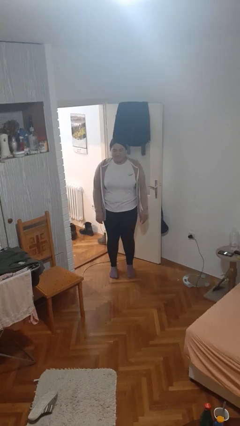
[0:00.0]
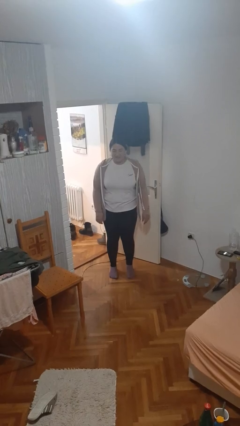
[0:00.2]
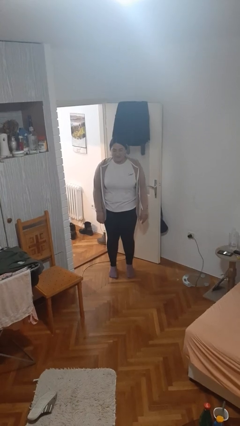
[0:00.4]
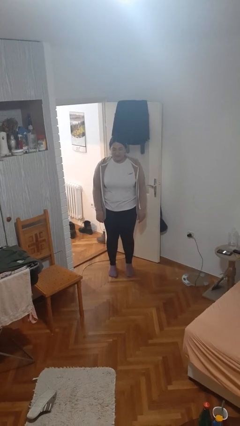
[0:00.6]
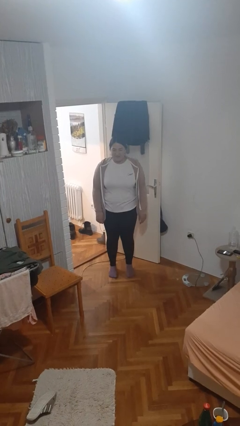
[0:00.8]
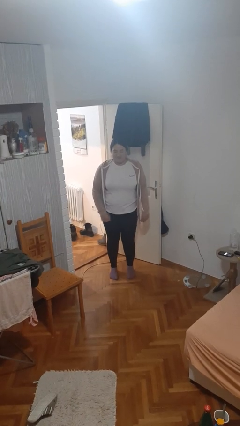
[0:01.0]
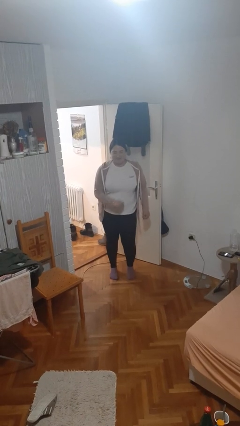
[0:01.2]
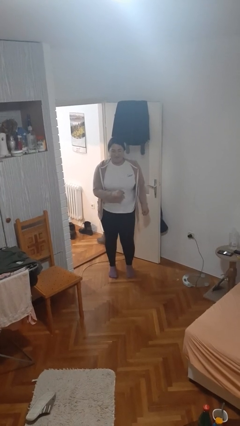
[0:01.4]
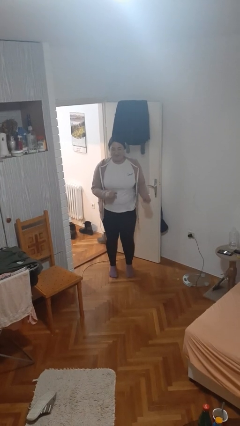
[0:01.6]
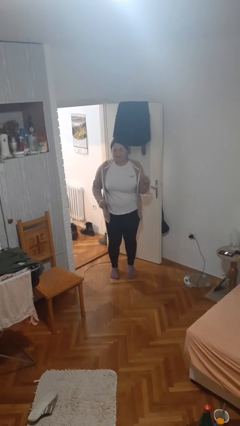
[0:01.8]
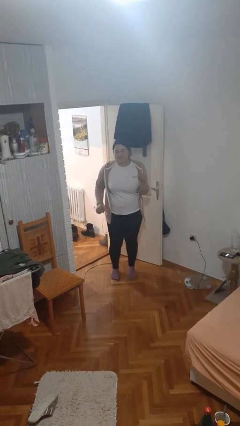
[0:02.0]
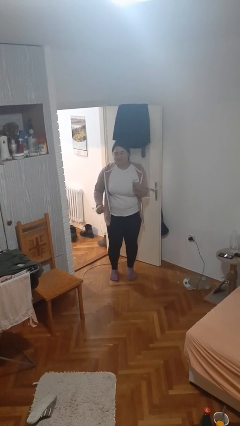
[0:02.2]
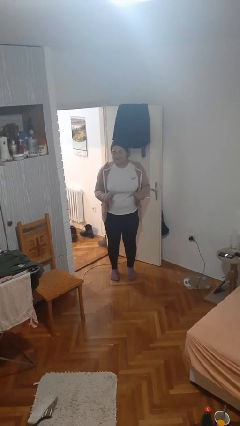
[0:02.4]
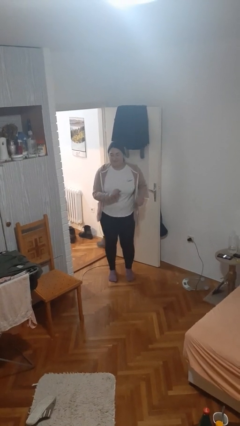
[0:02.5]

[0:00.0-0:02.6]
person dances in place

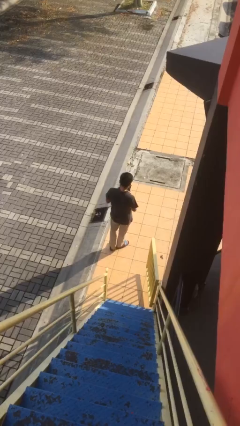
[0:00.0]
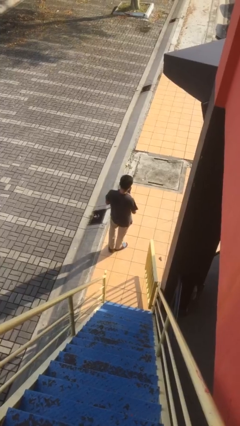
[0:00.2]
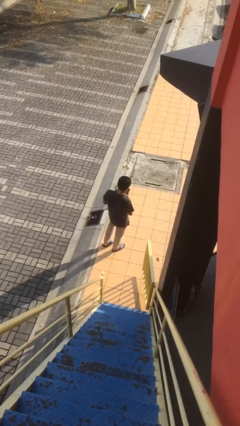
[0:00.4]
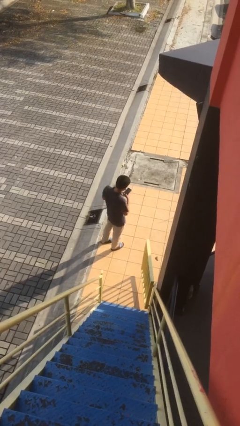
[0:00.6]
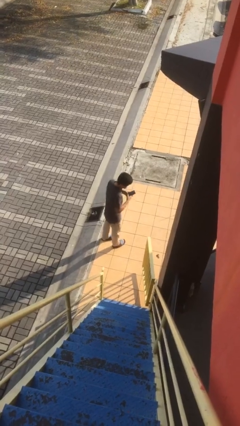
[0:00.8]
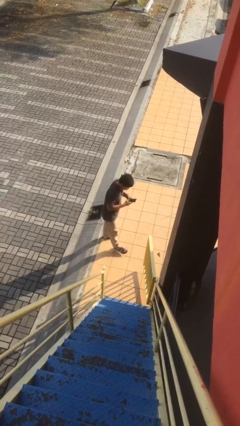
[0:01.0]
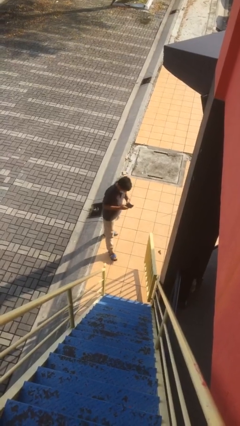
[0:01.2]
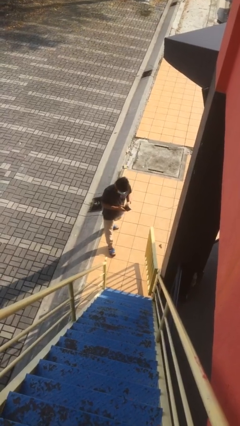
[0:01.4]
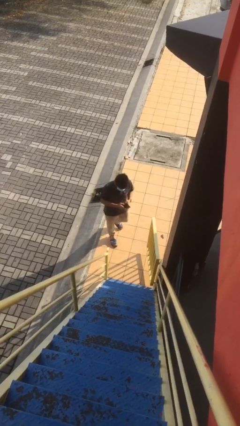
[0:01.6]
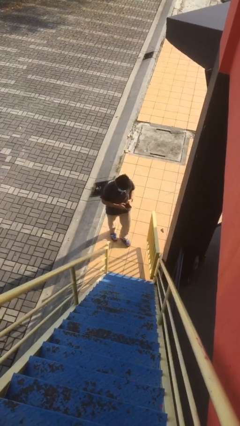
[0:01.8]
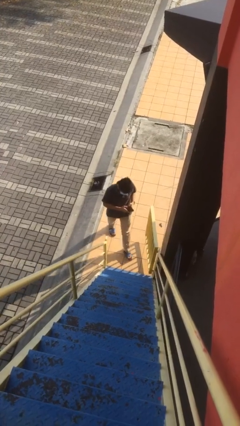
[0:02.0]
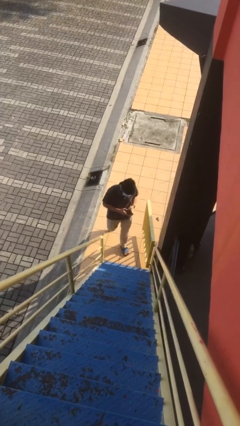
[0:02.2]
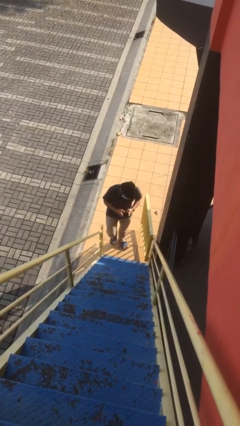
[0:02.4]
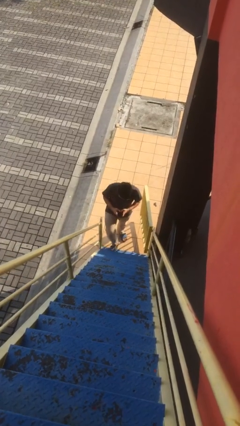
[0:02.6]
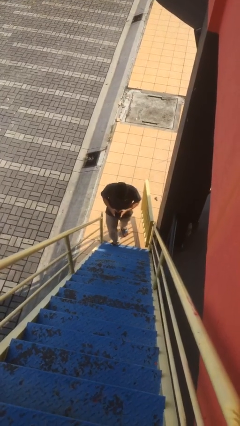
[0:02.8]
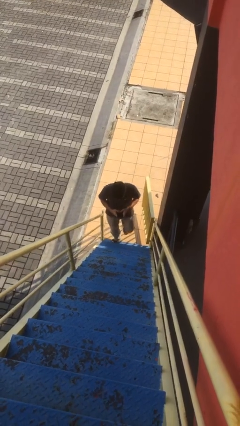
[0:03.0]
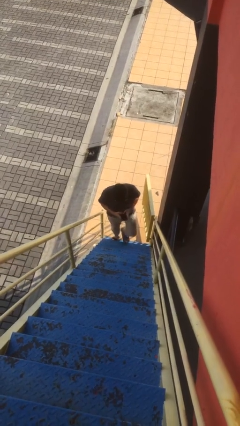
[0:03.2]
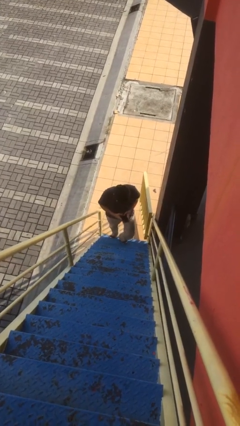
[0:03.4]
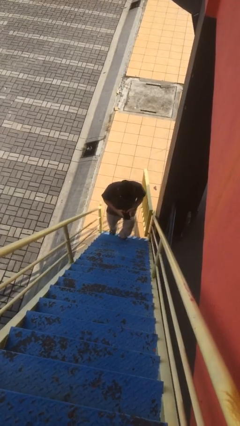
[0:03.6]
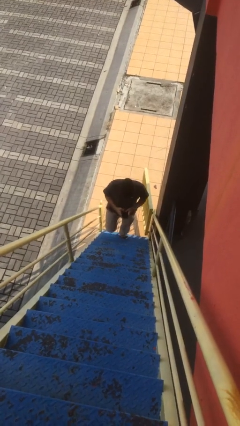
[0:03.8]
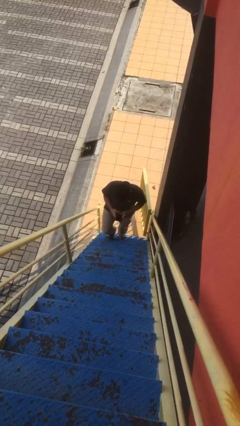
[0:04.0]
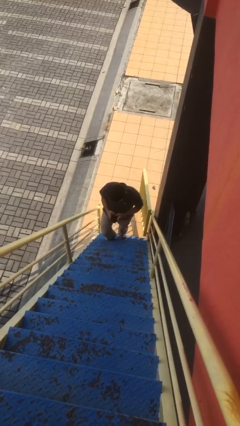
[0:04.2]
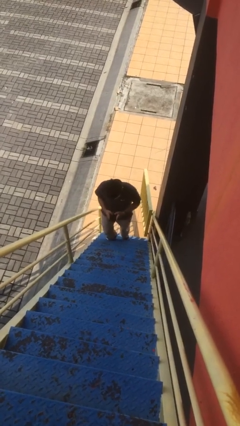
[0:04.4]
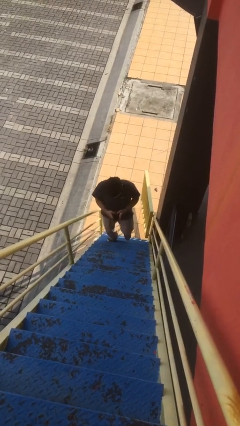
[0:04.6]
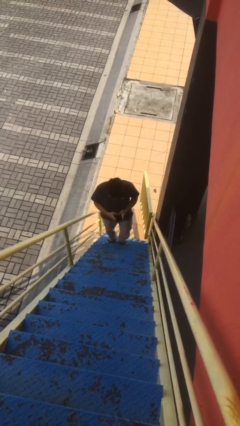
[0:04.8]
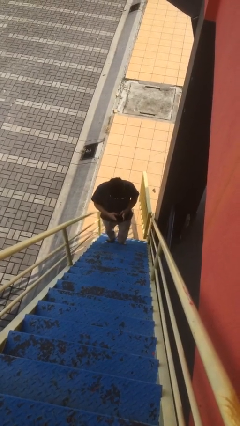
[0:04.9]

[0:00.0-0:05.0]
person enters scene through structure

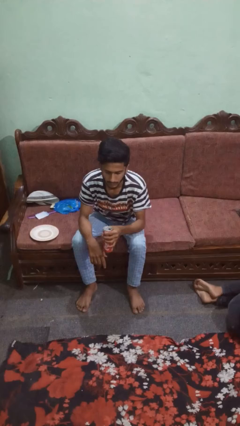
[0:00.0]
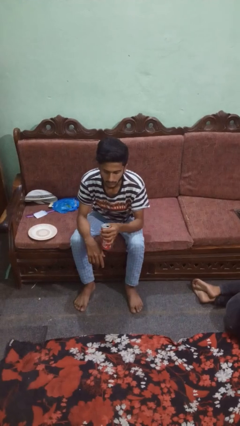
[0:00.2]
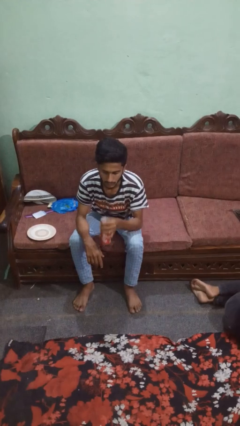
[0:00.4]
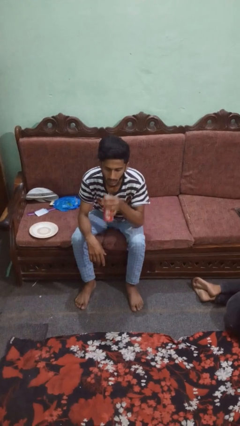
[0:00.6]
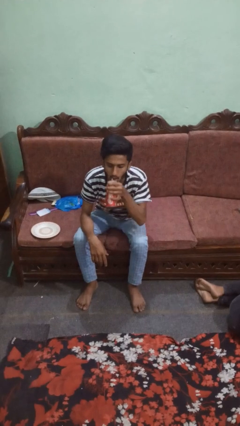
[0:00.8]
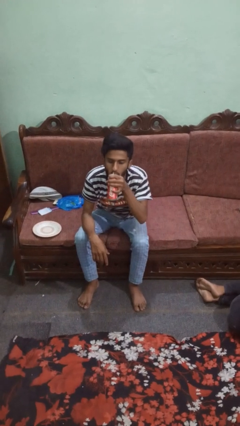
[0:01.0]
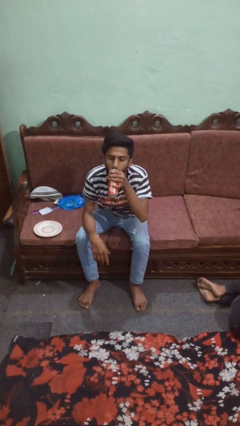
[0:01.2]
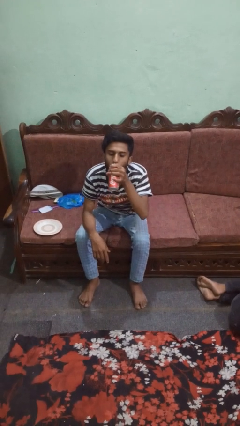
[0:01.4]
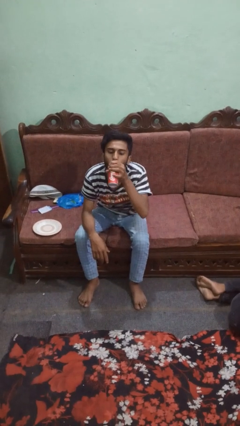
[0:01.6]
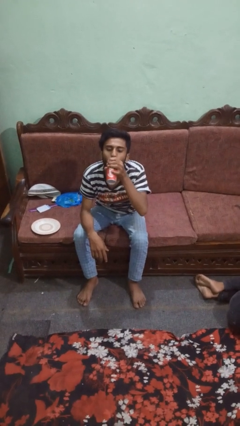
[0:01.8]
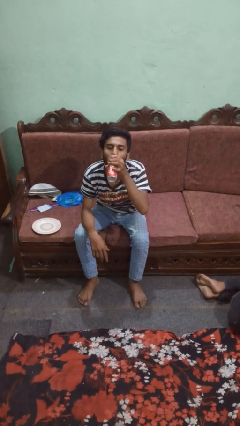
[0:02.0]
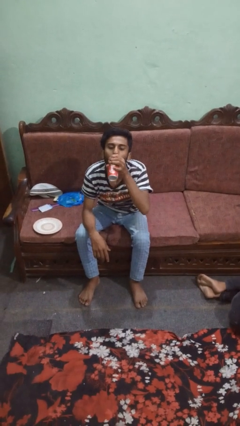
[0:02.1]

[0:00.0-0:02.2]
person drinks from beverage can

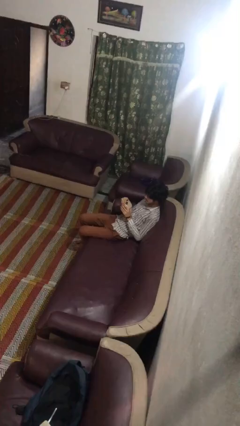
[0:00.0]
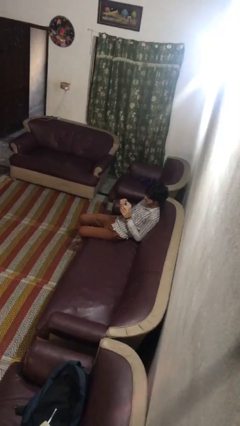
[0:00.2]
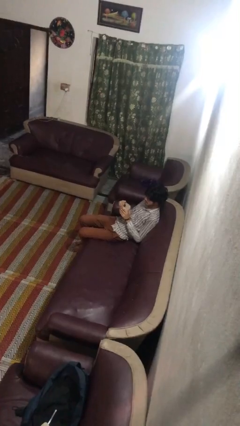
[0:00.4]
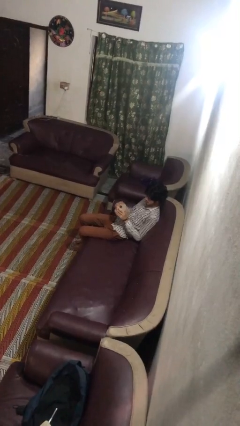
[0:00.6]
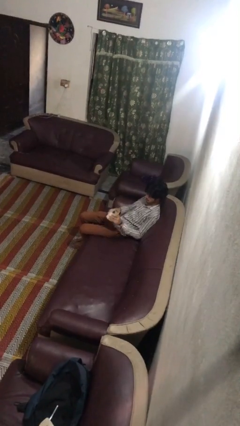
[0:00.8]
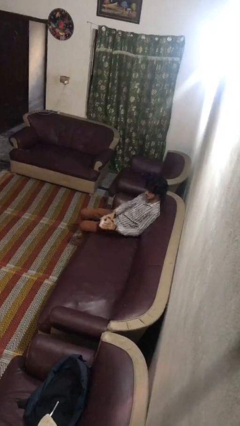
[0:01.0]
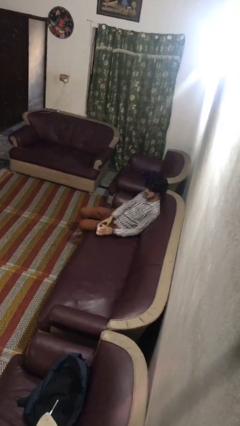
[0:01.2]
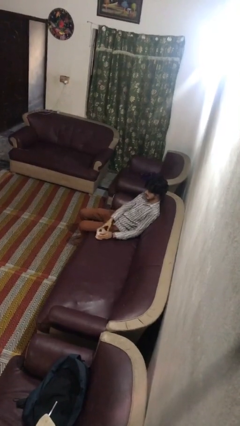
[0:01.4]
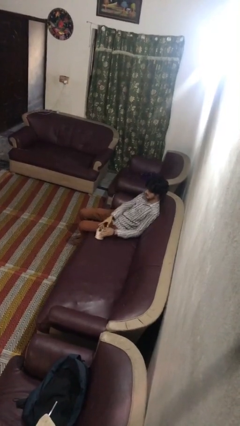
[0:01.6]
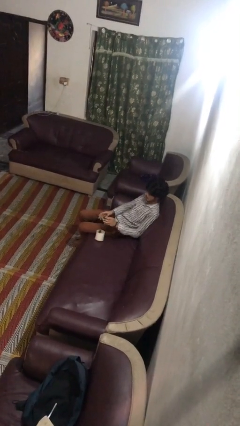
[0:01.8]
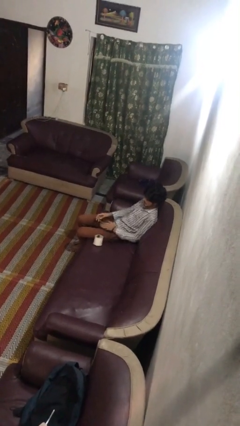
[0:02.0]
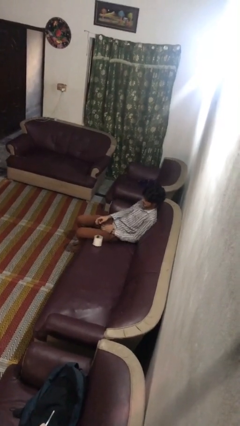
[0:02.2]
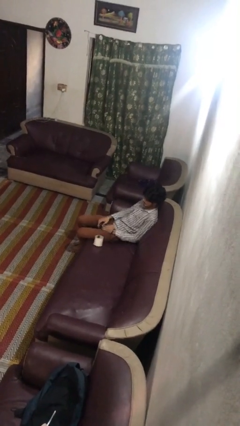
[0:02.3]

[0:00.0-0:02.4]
person puts down object on couch

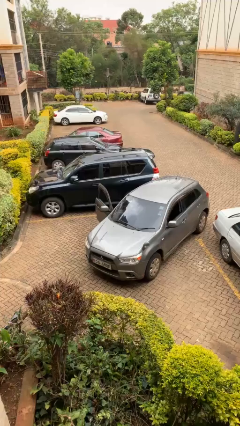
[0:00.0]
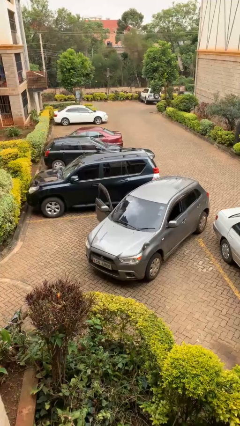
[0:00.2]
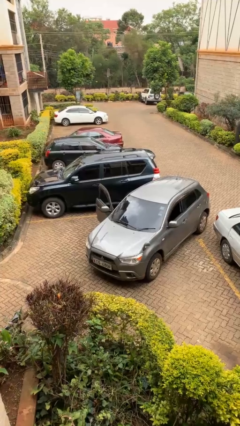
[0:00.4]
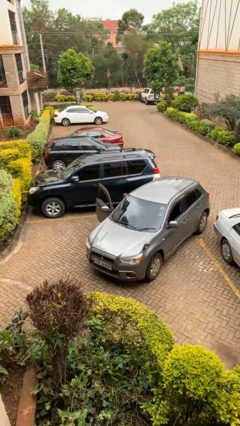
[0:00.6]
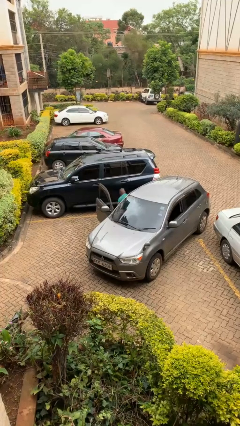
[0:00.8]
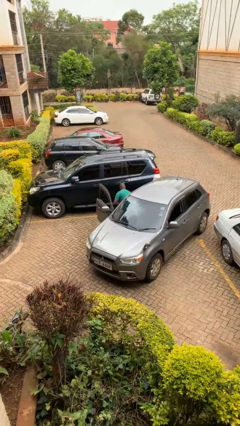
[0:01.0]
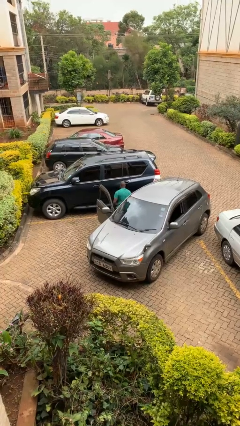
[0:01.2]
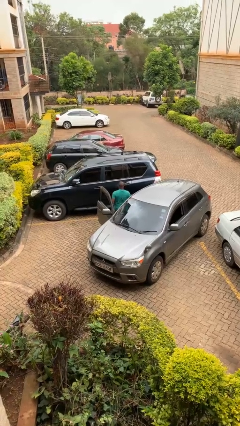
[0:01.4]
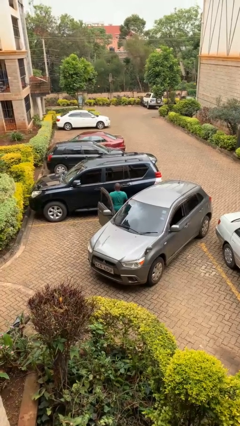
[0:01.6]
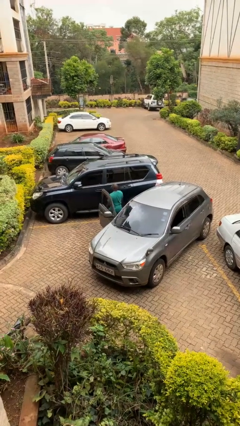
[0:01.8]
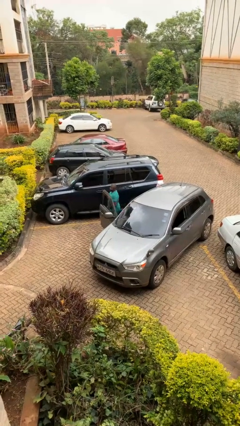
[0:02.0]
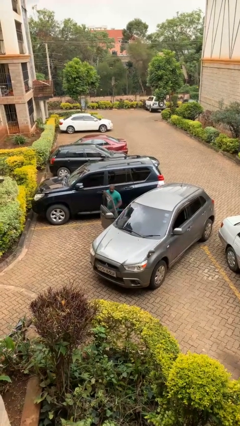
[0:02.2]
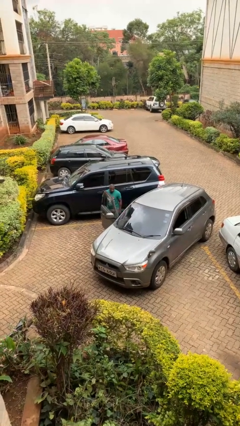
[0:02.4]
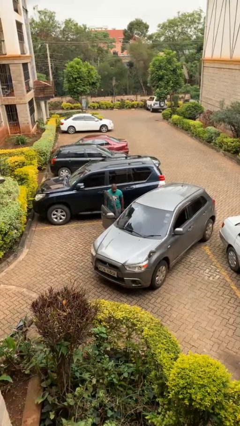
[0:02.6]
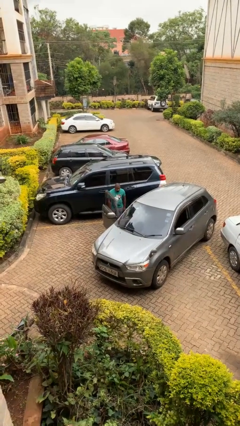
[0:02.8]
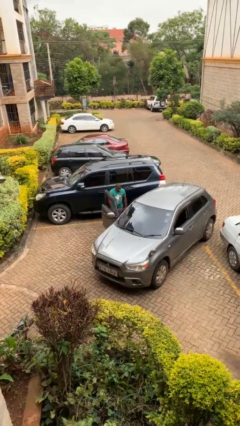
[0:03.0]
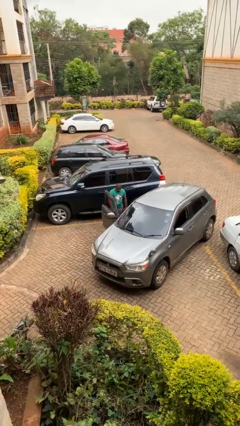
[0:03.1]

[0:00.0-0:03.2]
person exits car

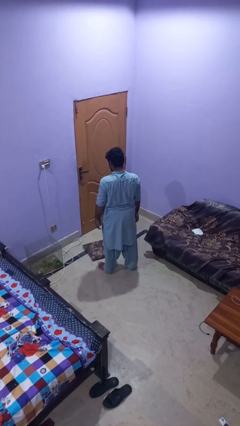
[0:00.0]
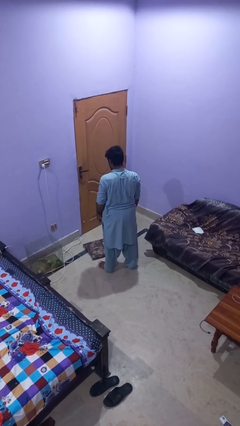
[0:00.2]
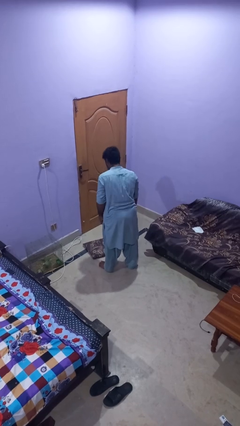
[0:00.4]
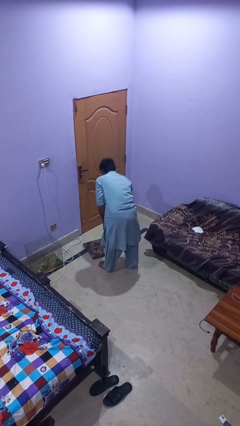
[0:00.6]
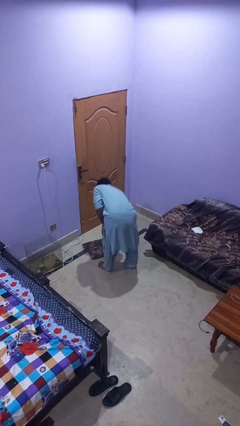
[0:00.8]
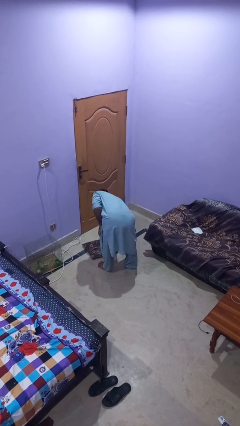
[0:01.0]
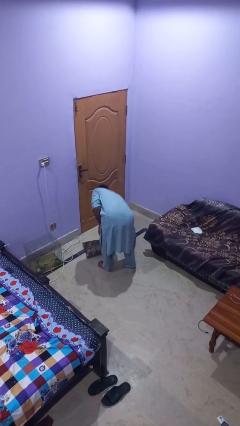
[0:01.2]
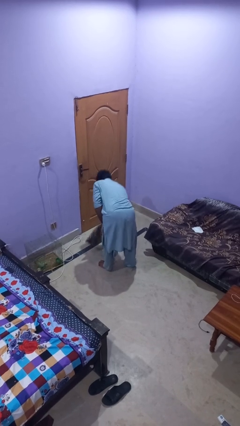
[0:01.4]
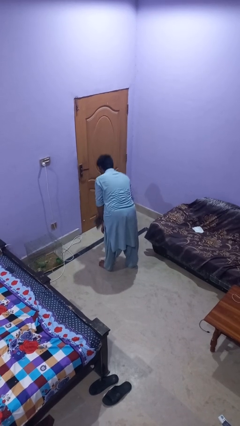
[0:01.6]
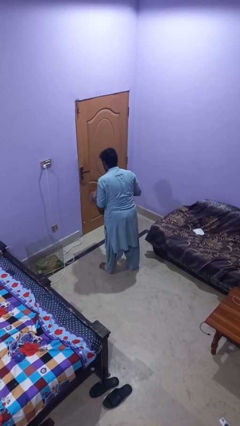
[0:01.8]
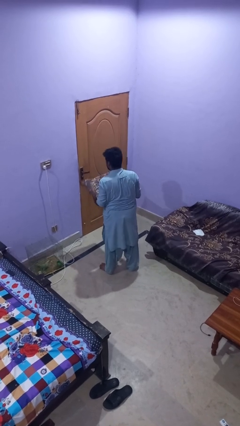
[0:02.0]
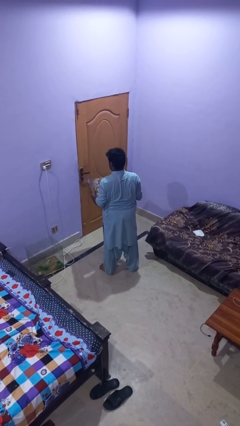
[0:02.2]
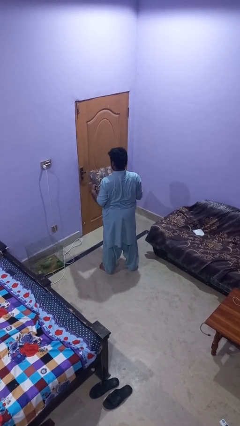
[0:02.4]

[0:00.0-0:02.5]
person picks up object from floor
